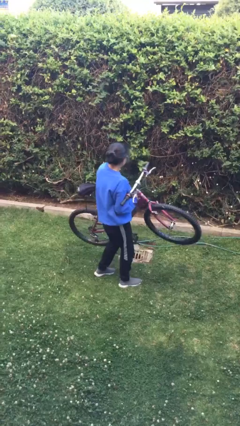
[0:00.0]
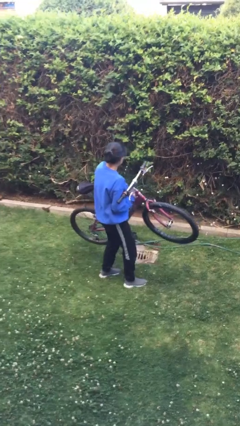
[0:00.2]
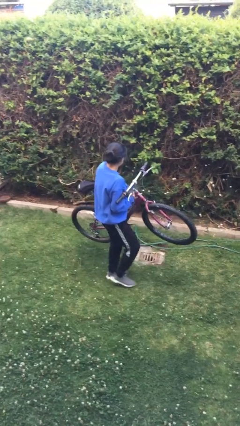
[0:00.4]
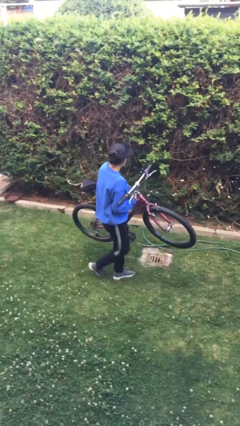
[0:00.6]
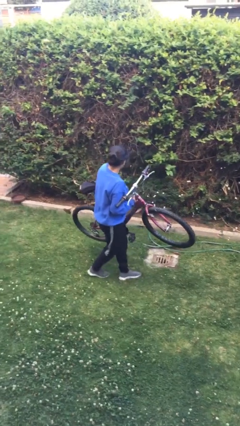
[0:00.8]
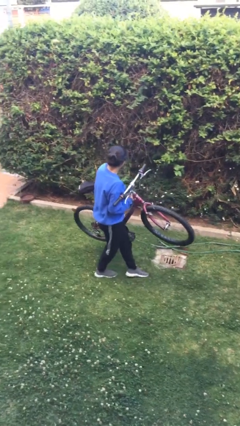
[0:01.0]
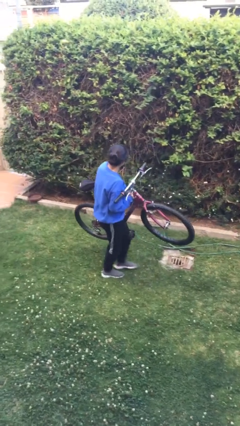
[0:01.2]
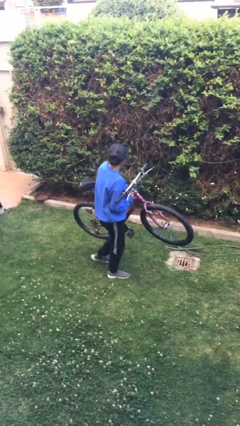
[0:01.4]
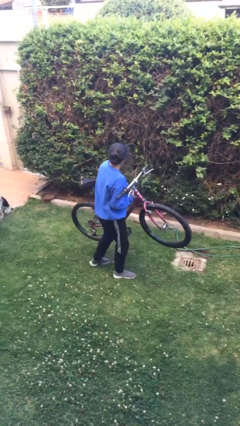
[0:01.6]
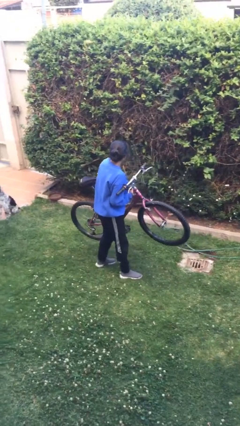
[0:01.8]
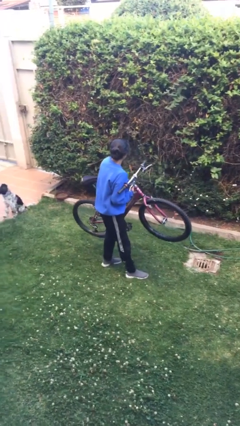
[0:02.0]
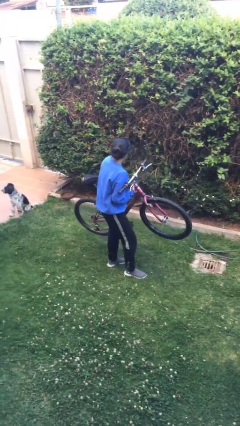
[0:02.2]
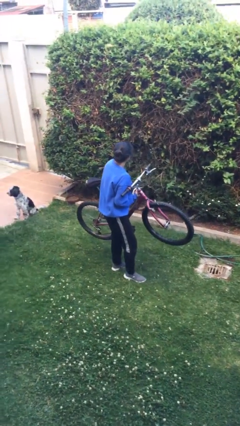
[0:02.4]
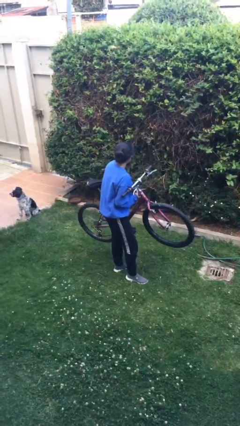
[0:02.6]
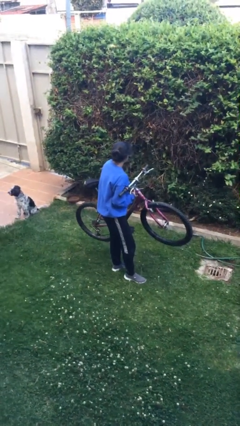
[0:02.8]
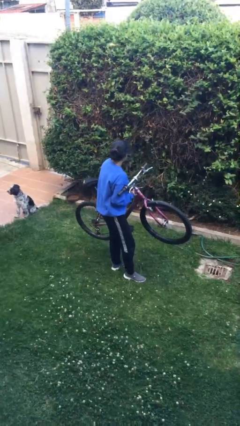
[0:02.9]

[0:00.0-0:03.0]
person carries bicycle

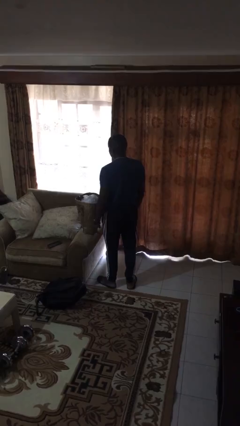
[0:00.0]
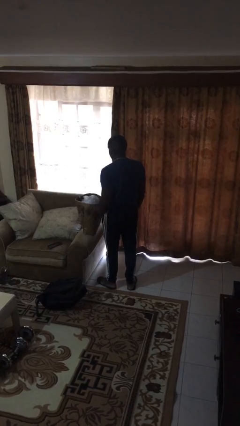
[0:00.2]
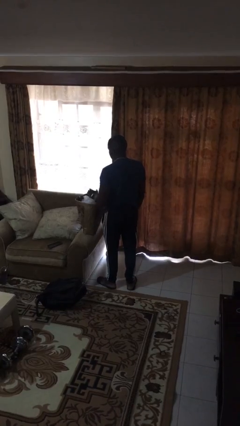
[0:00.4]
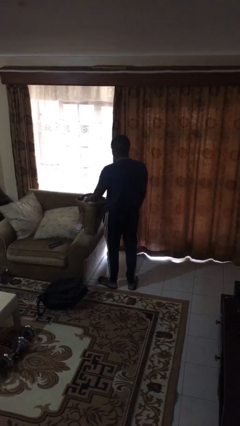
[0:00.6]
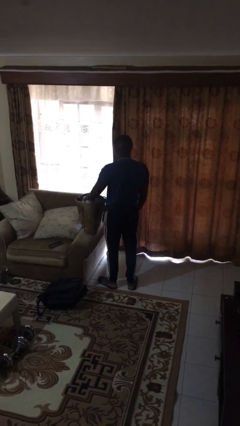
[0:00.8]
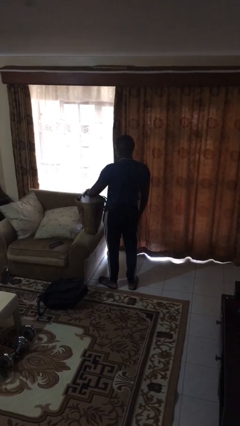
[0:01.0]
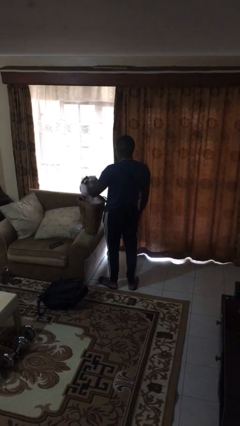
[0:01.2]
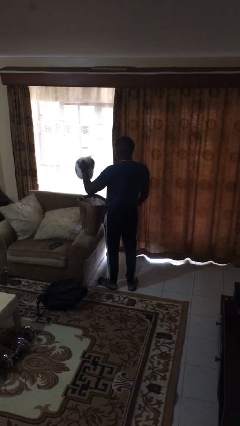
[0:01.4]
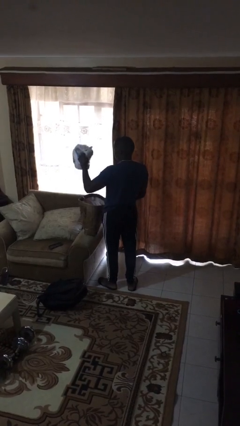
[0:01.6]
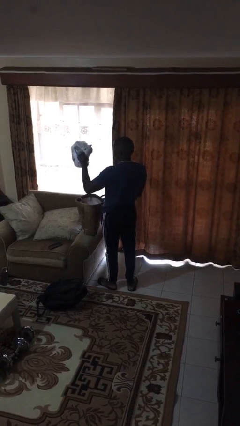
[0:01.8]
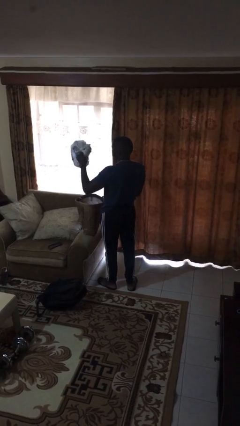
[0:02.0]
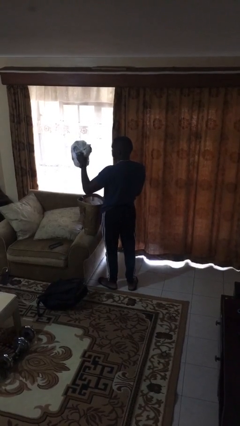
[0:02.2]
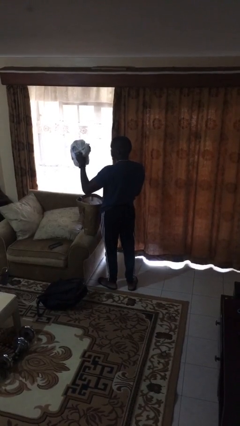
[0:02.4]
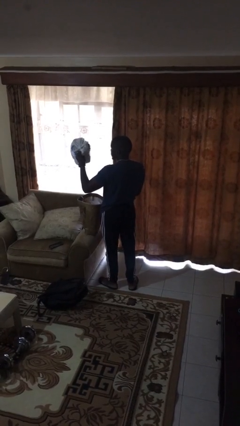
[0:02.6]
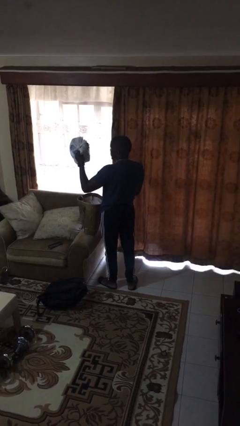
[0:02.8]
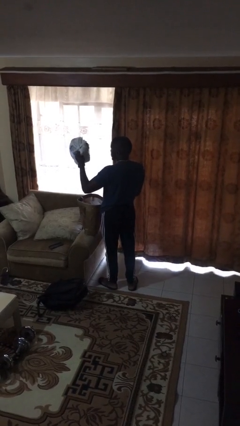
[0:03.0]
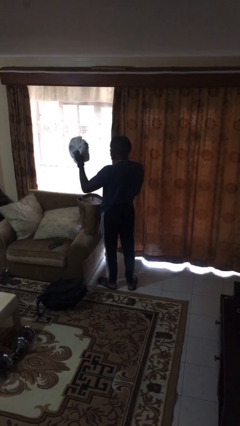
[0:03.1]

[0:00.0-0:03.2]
person takes object from bag

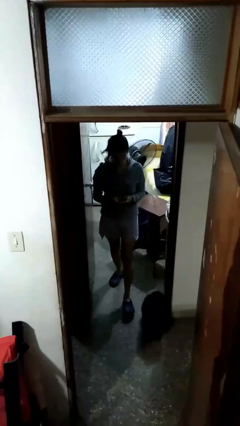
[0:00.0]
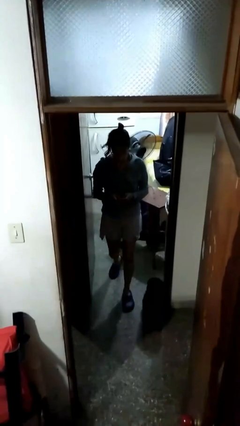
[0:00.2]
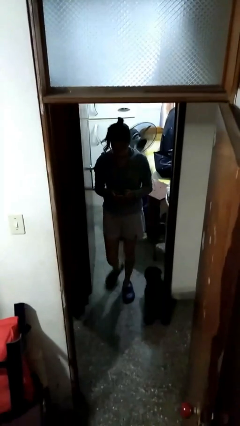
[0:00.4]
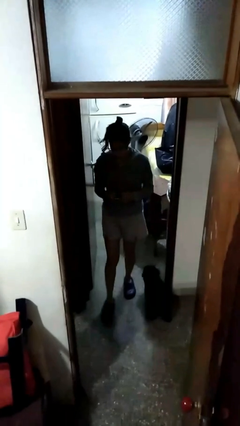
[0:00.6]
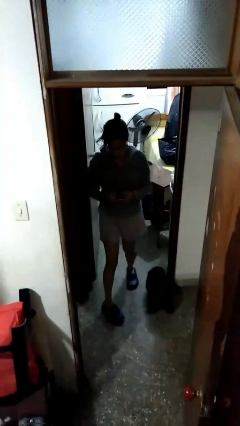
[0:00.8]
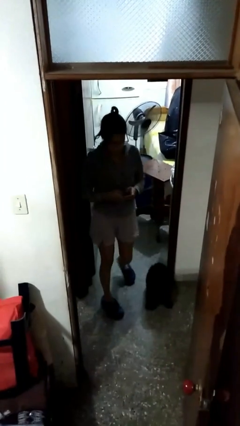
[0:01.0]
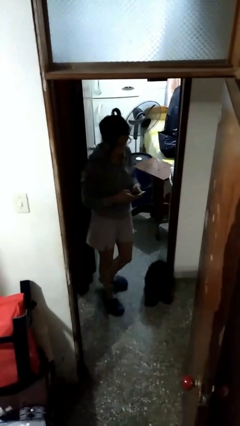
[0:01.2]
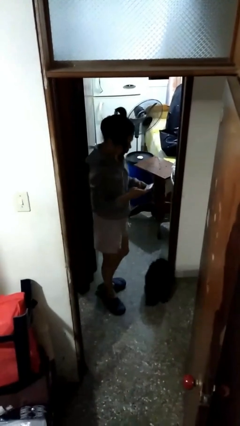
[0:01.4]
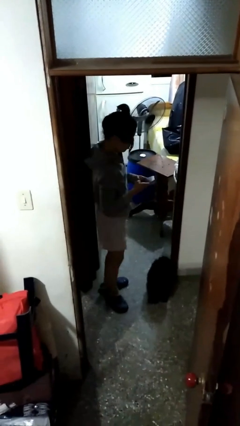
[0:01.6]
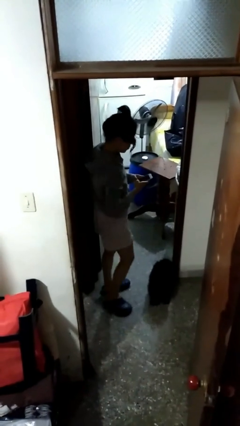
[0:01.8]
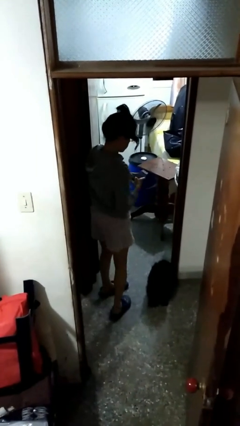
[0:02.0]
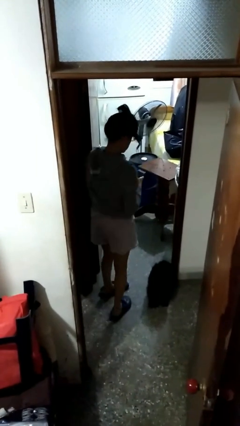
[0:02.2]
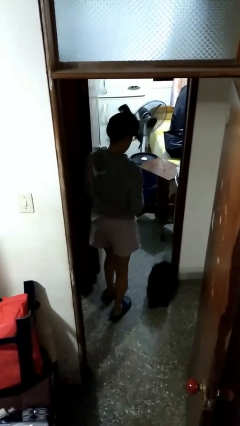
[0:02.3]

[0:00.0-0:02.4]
person enters scene through structure

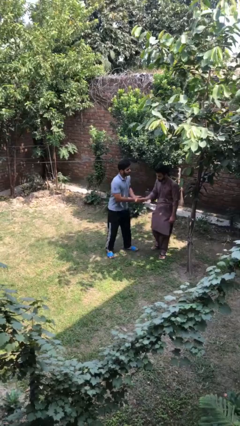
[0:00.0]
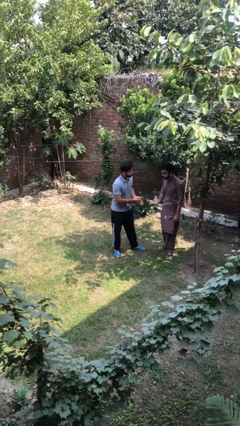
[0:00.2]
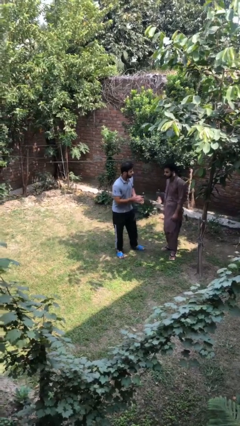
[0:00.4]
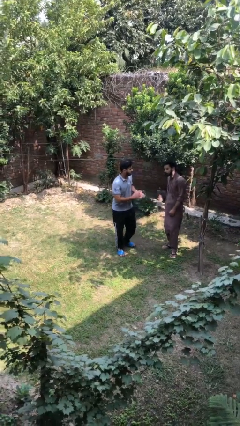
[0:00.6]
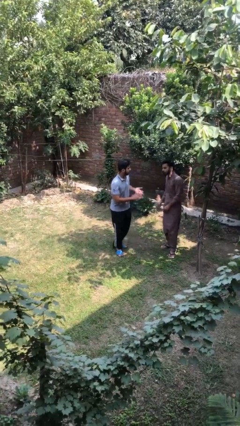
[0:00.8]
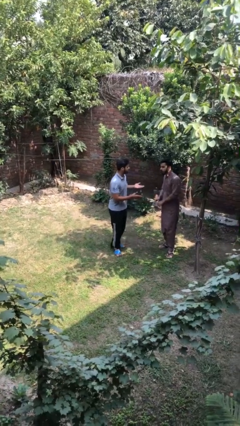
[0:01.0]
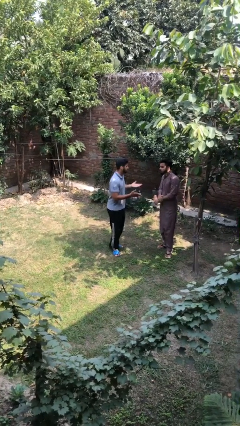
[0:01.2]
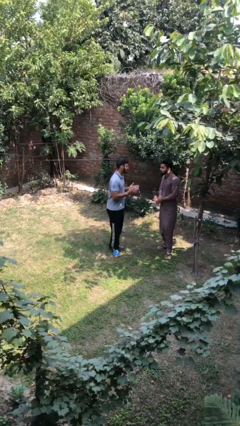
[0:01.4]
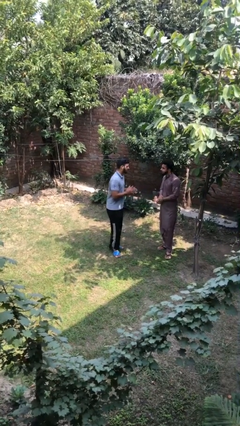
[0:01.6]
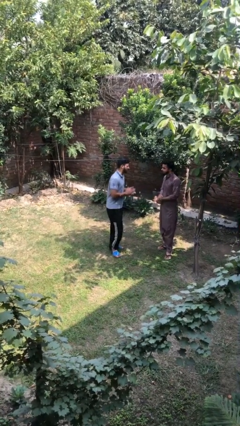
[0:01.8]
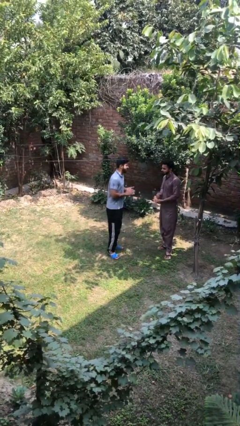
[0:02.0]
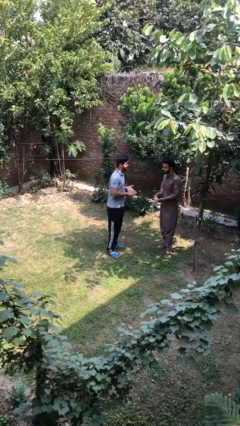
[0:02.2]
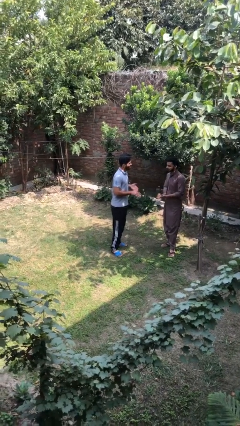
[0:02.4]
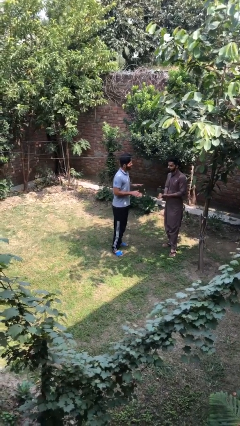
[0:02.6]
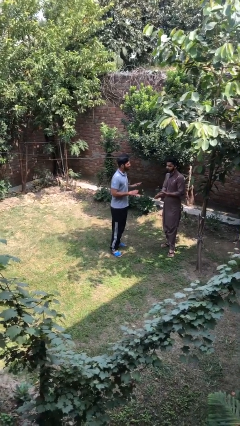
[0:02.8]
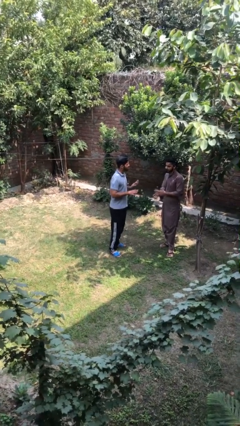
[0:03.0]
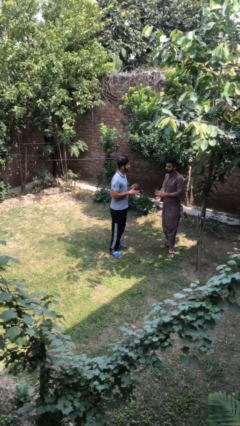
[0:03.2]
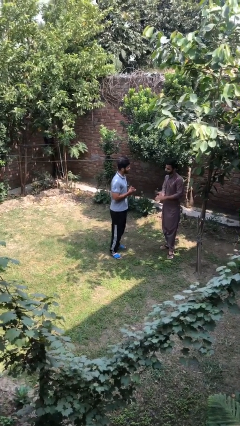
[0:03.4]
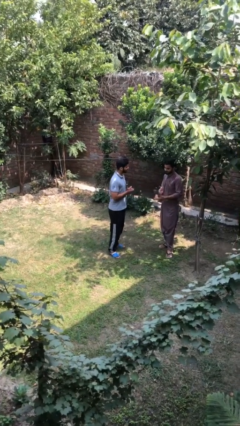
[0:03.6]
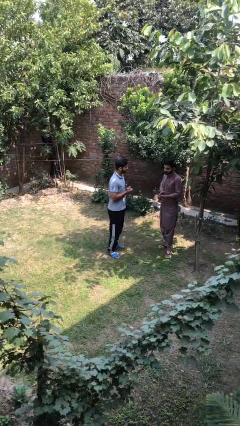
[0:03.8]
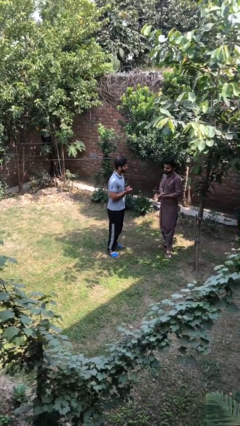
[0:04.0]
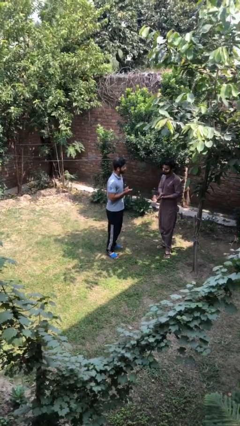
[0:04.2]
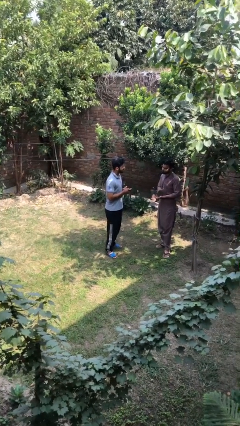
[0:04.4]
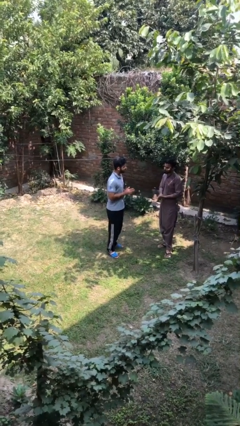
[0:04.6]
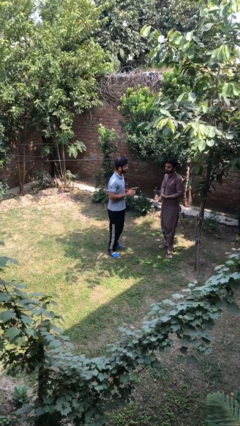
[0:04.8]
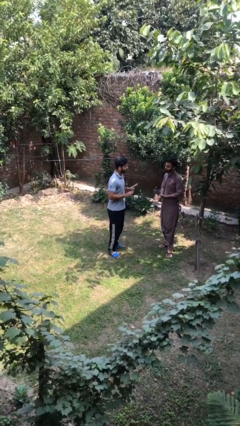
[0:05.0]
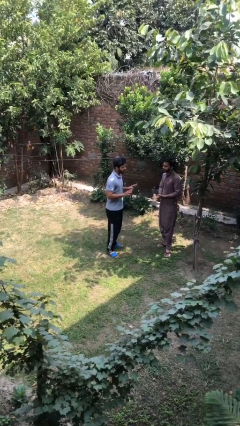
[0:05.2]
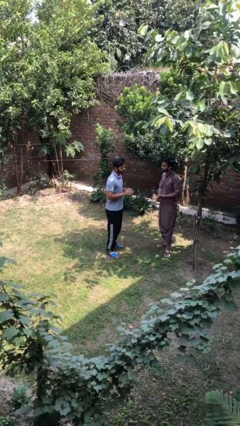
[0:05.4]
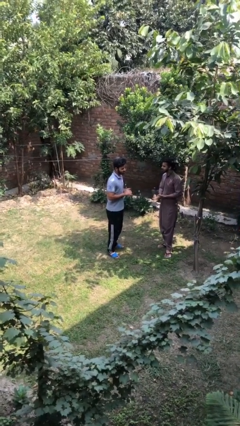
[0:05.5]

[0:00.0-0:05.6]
person talks to person

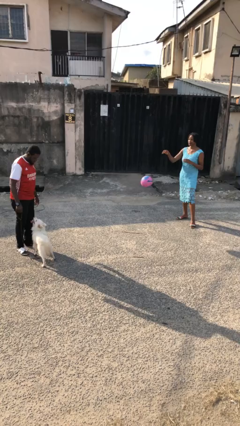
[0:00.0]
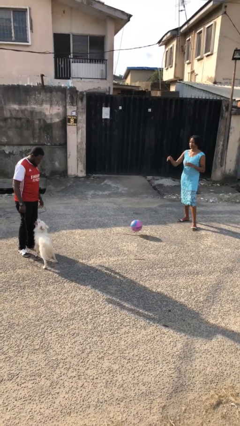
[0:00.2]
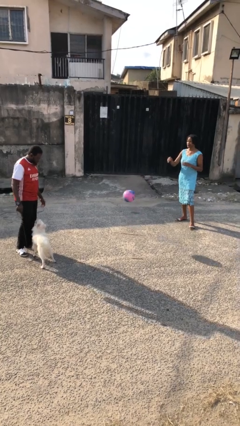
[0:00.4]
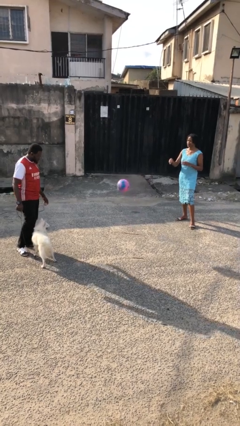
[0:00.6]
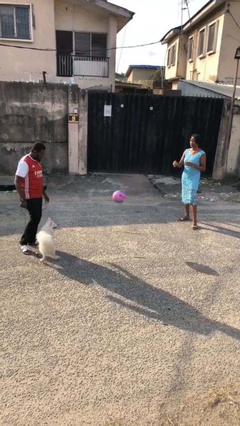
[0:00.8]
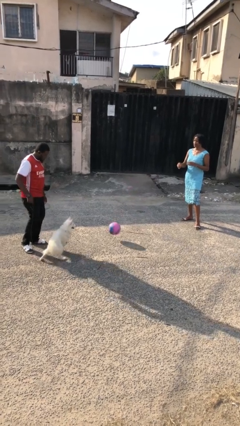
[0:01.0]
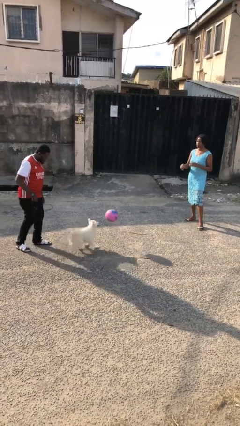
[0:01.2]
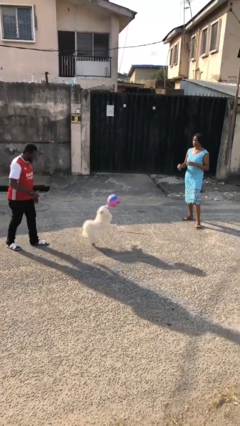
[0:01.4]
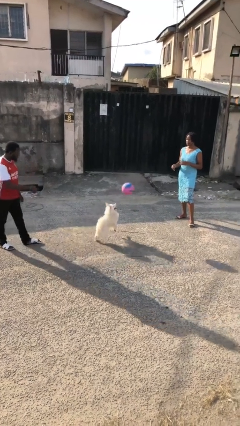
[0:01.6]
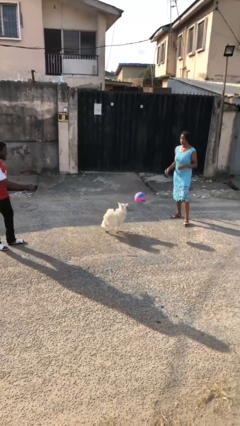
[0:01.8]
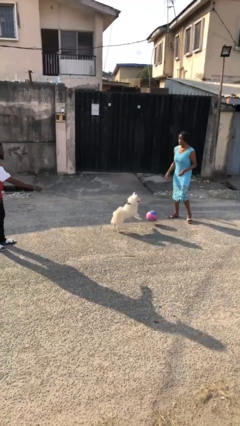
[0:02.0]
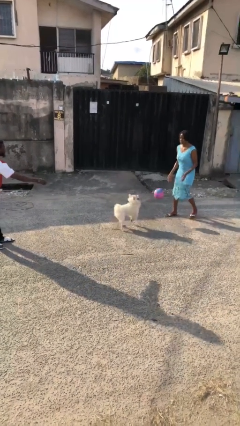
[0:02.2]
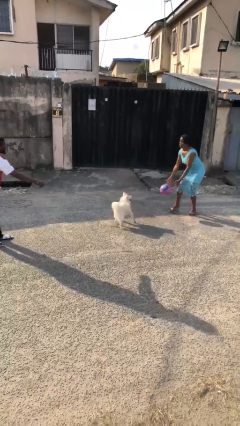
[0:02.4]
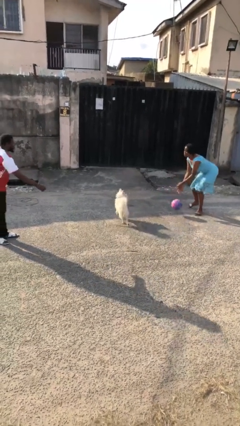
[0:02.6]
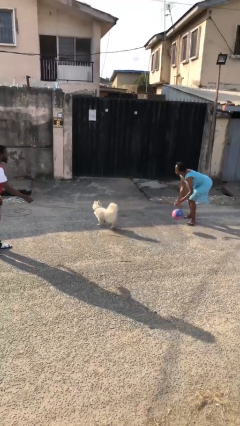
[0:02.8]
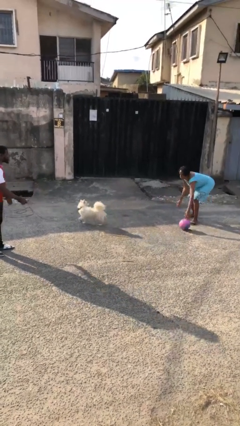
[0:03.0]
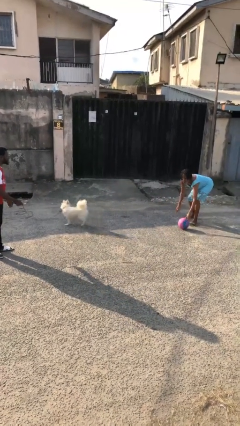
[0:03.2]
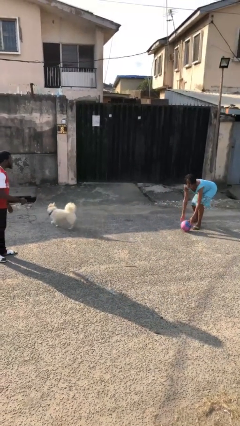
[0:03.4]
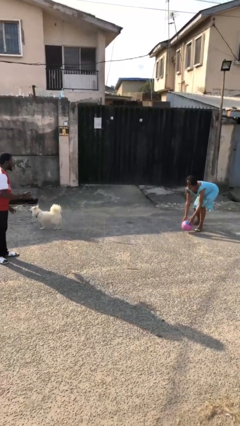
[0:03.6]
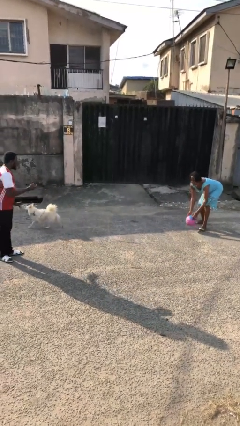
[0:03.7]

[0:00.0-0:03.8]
person throws object to dog
